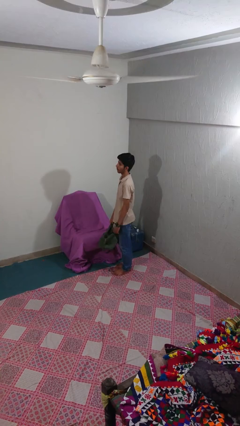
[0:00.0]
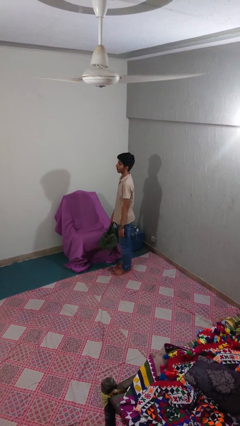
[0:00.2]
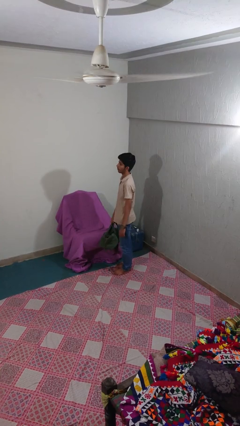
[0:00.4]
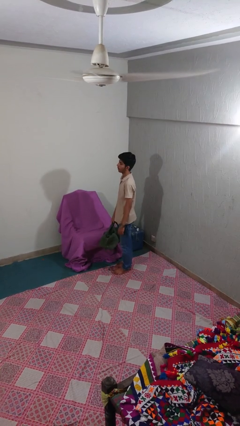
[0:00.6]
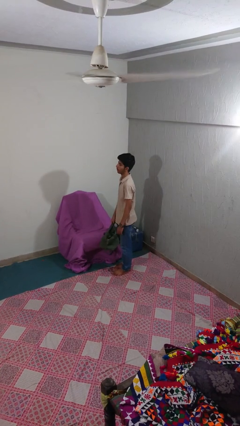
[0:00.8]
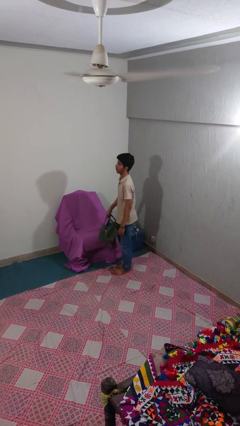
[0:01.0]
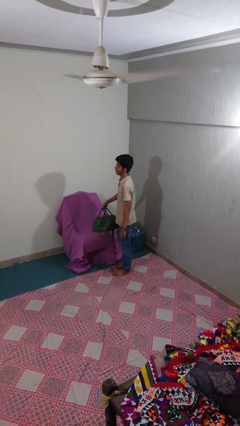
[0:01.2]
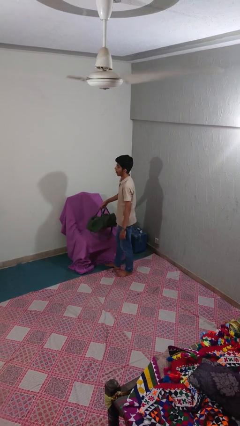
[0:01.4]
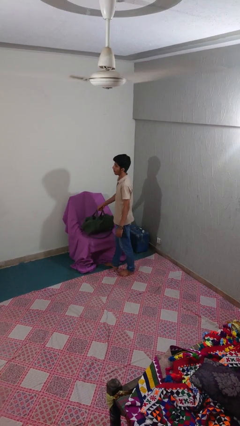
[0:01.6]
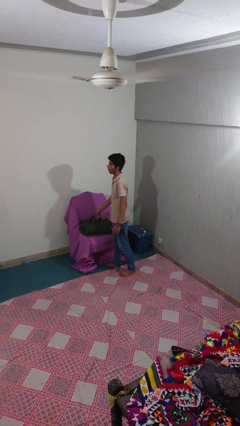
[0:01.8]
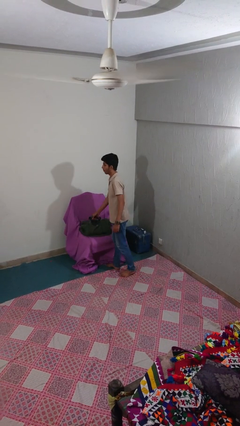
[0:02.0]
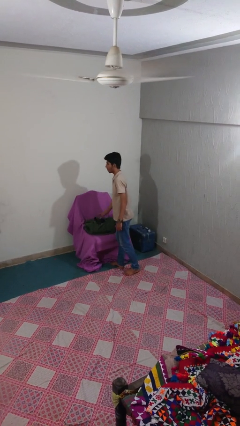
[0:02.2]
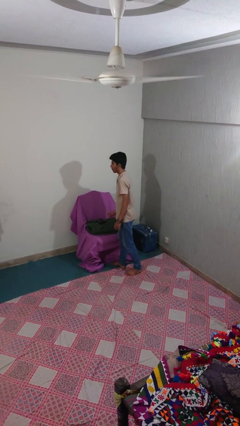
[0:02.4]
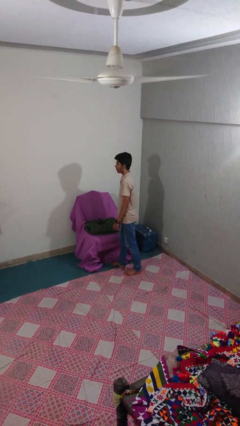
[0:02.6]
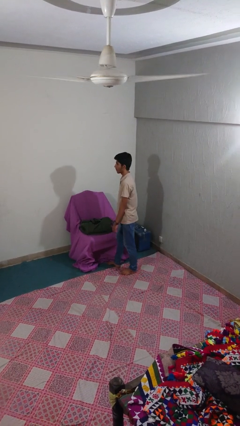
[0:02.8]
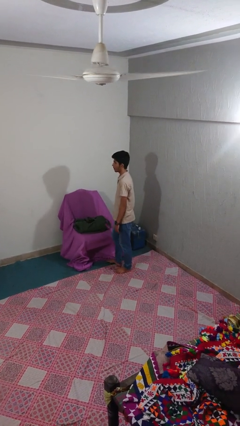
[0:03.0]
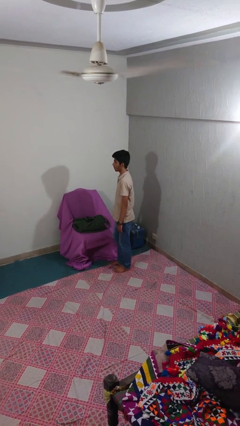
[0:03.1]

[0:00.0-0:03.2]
person puts down object on couch

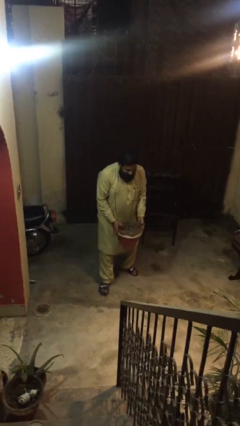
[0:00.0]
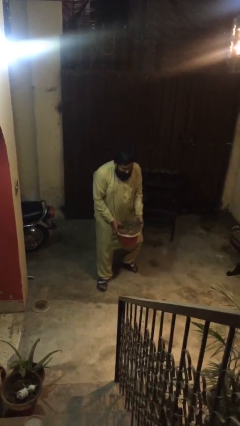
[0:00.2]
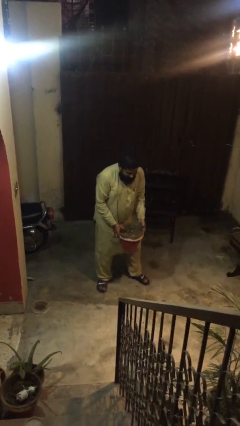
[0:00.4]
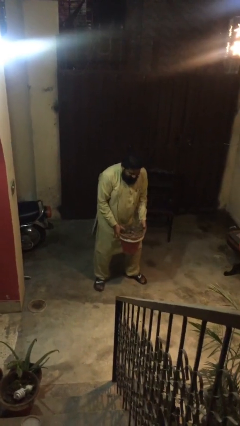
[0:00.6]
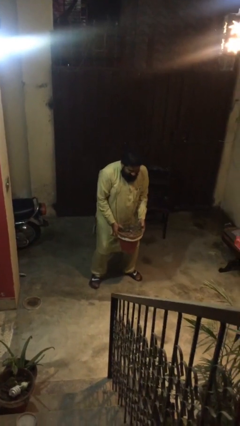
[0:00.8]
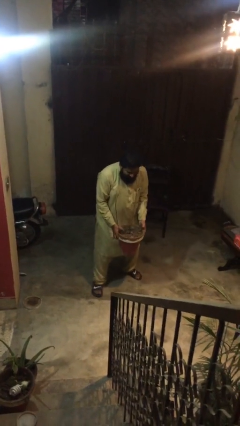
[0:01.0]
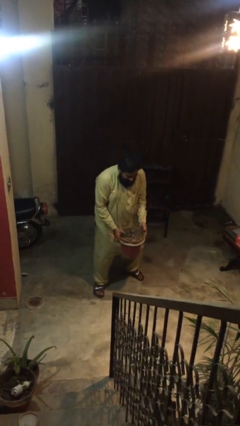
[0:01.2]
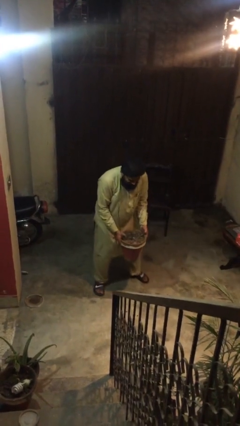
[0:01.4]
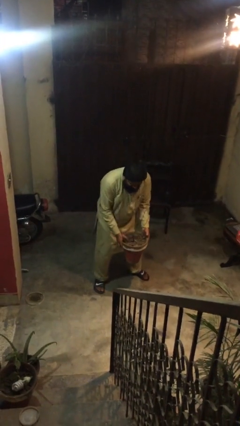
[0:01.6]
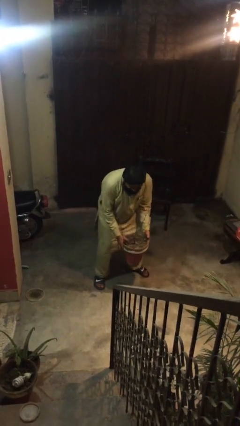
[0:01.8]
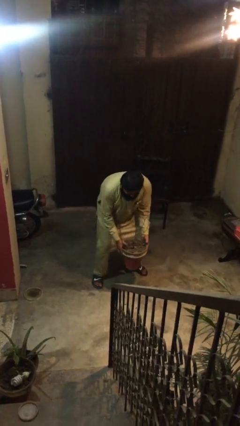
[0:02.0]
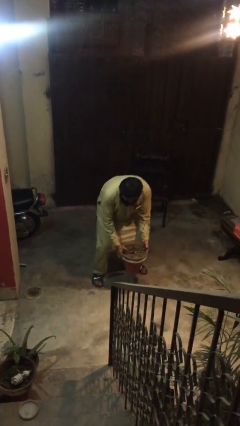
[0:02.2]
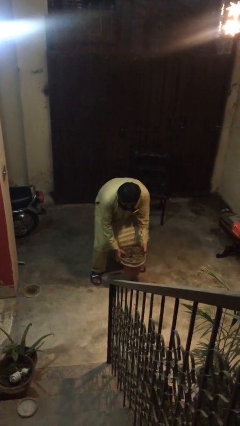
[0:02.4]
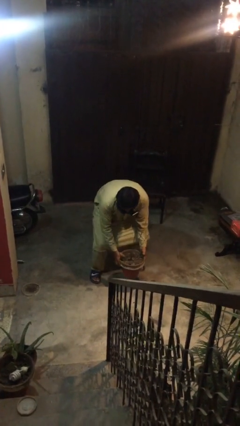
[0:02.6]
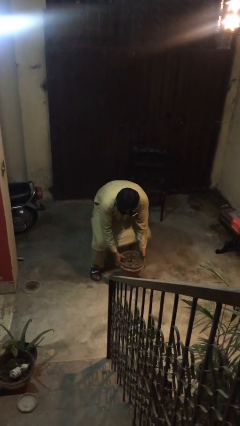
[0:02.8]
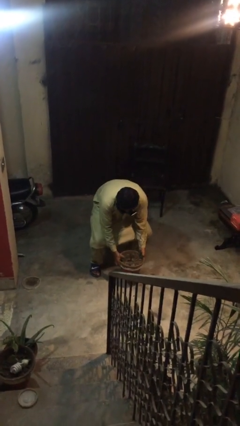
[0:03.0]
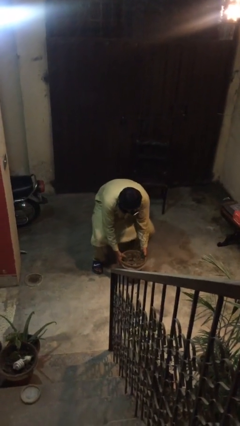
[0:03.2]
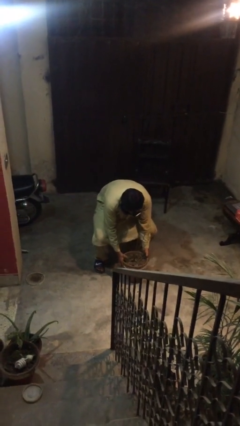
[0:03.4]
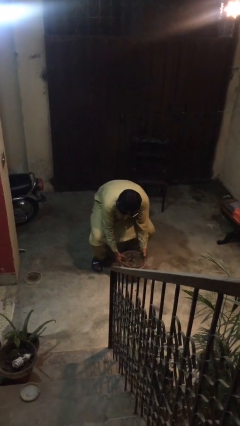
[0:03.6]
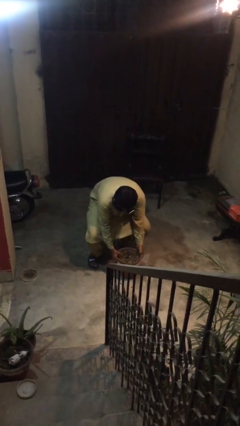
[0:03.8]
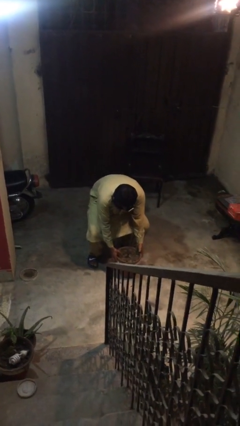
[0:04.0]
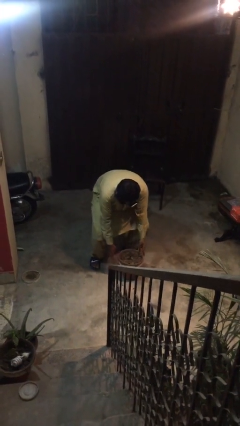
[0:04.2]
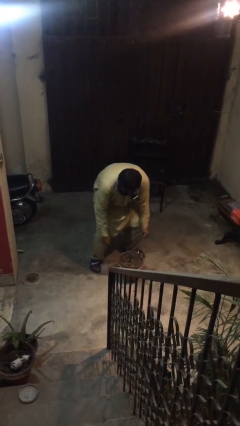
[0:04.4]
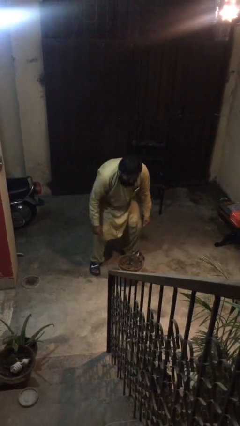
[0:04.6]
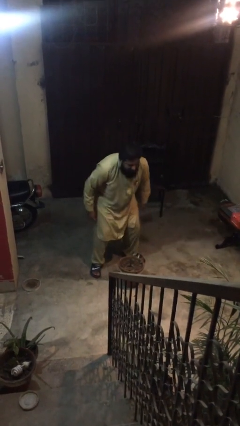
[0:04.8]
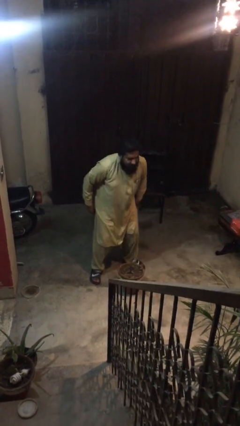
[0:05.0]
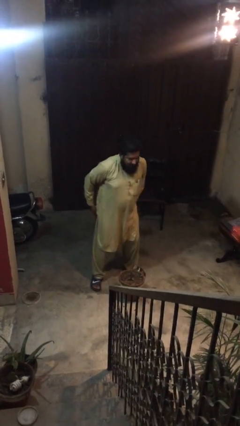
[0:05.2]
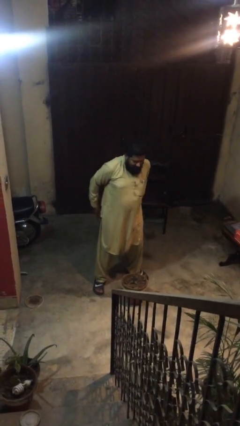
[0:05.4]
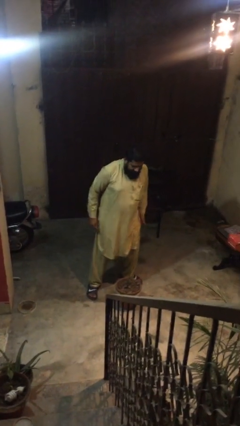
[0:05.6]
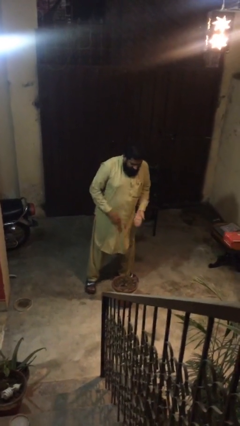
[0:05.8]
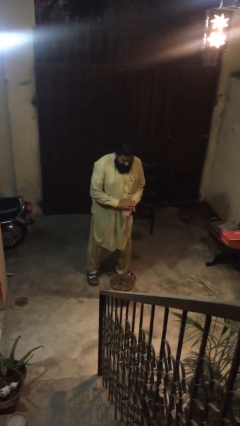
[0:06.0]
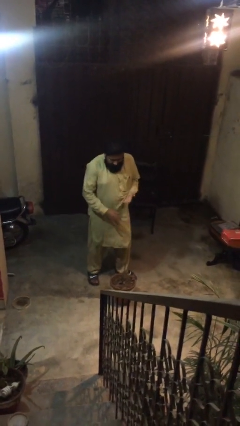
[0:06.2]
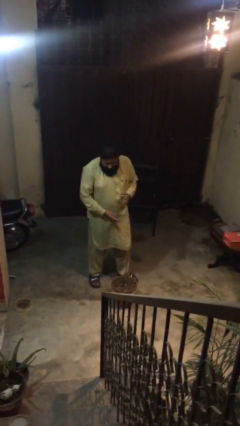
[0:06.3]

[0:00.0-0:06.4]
person puts down object on floor

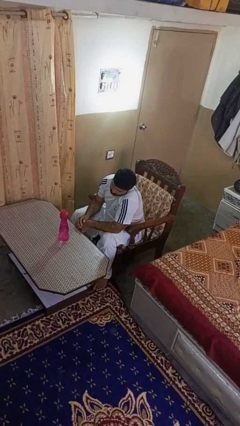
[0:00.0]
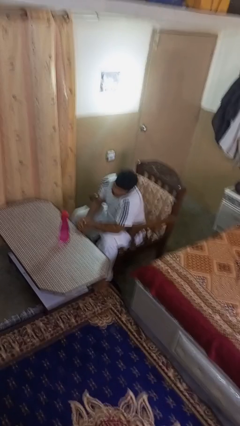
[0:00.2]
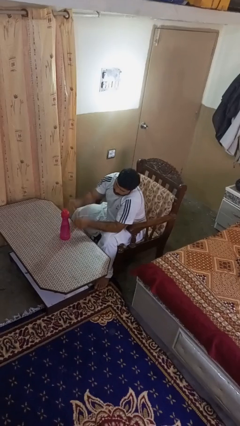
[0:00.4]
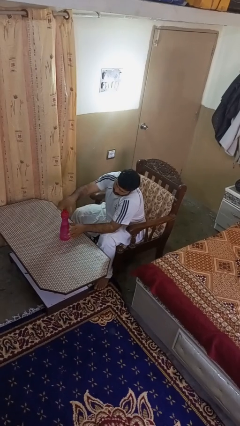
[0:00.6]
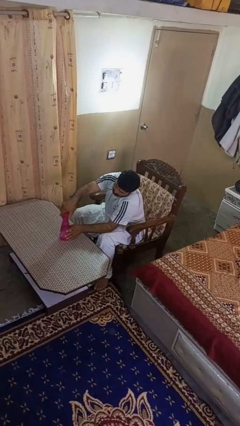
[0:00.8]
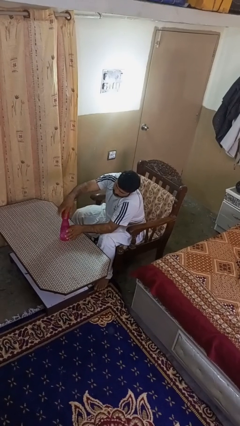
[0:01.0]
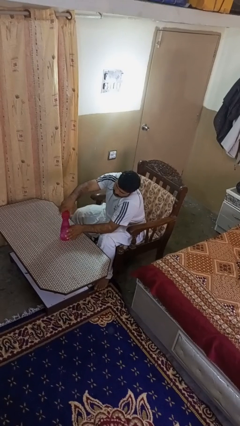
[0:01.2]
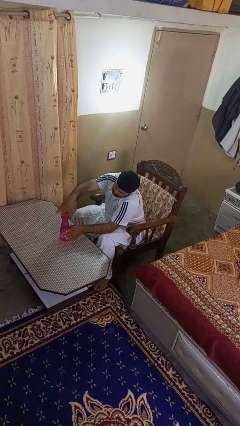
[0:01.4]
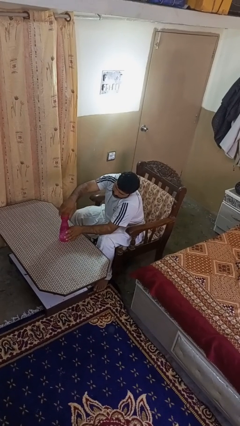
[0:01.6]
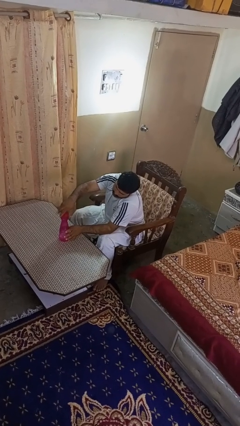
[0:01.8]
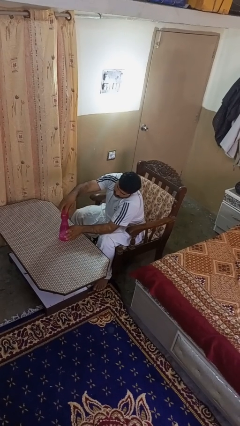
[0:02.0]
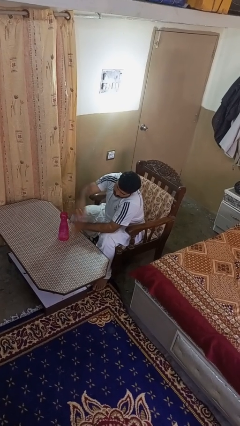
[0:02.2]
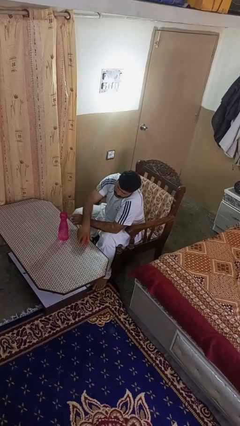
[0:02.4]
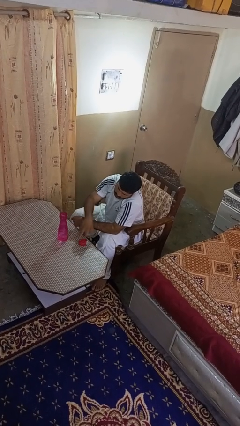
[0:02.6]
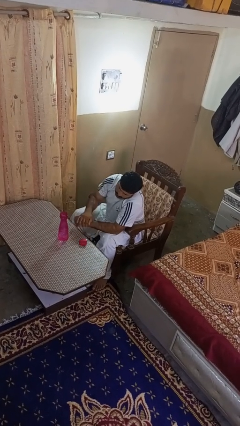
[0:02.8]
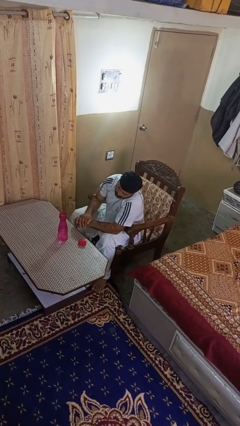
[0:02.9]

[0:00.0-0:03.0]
person unscrews lid from bottle

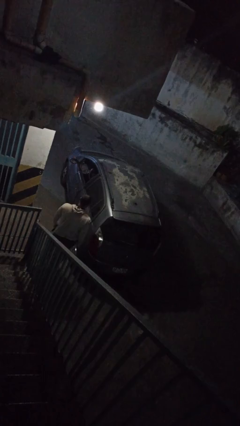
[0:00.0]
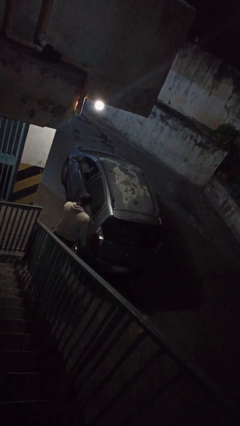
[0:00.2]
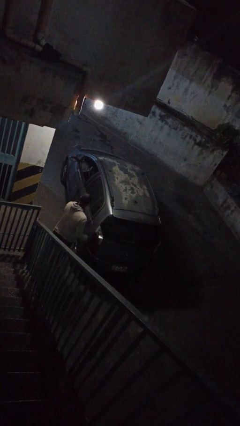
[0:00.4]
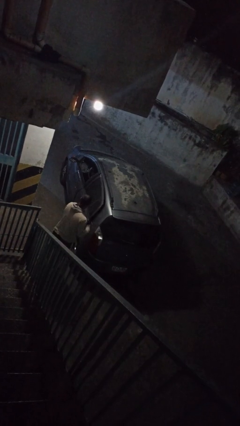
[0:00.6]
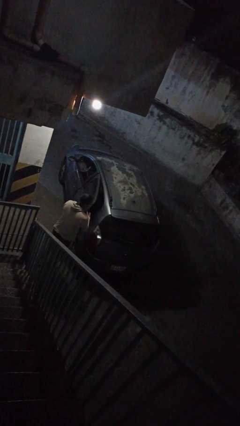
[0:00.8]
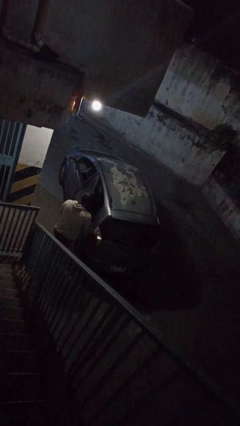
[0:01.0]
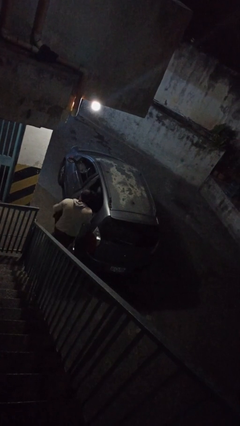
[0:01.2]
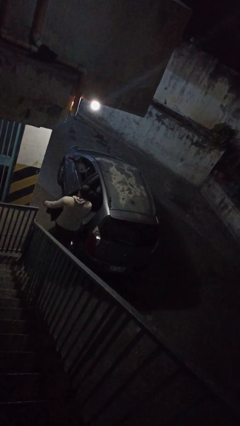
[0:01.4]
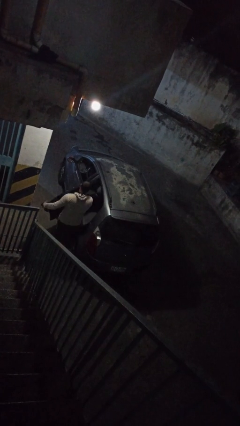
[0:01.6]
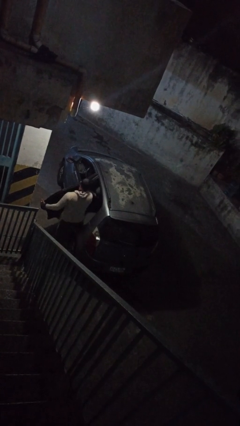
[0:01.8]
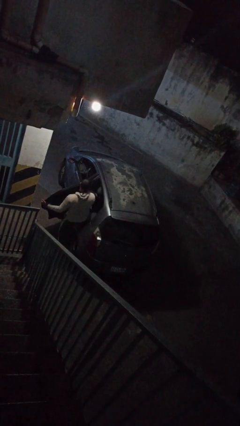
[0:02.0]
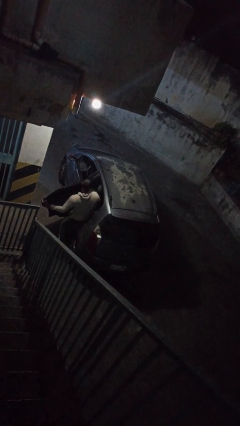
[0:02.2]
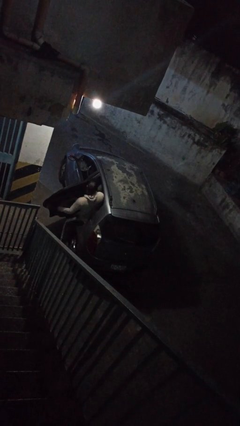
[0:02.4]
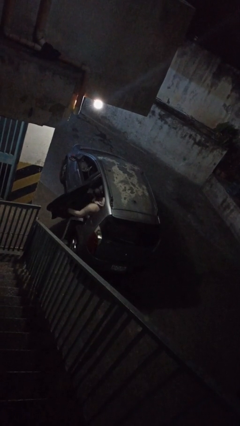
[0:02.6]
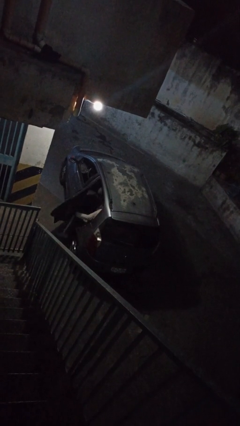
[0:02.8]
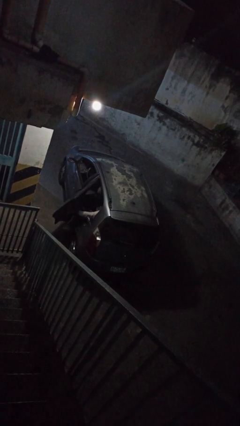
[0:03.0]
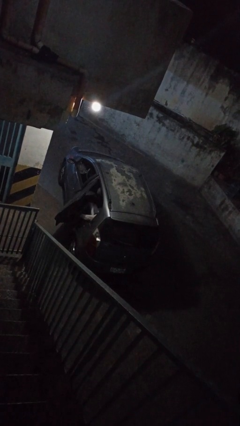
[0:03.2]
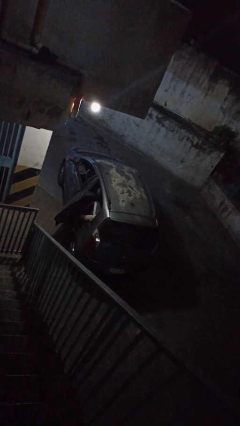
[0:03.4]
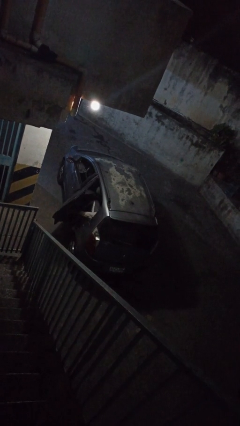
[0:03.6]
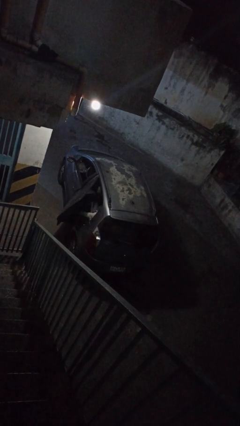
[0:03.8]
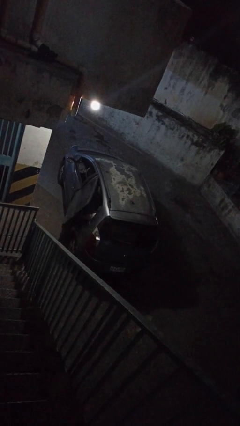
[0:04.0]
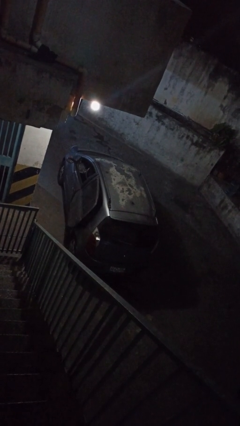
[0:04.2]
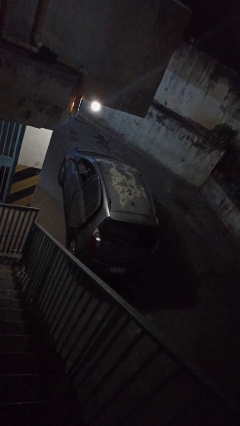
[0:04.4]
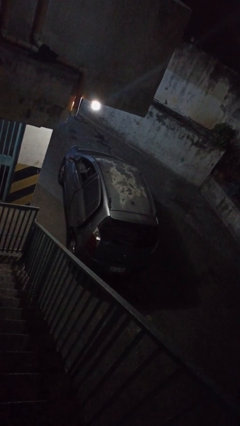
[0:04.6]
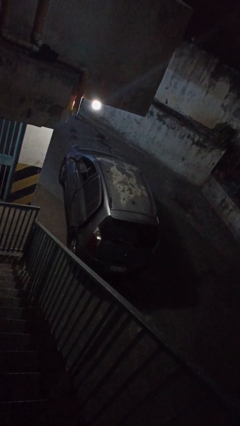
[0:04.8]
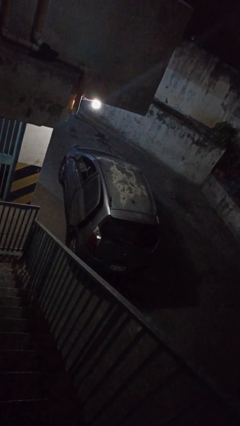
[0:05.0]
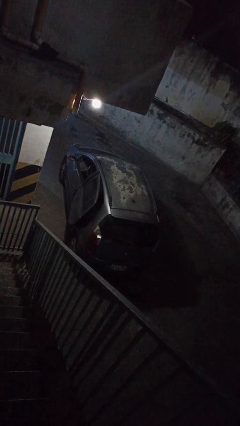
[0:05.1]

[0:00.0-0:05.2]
car picks up person
